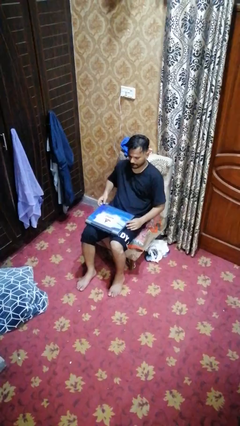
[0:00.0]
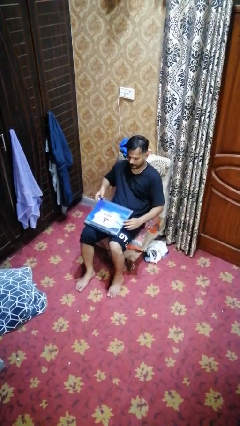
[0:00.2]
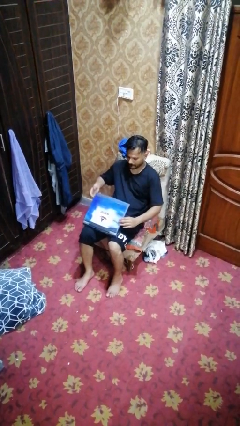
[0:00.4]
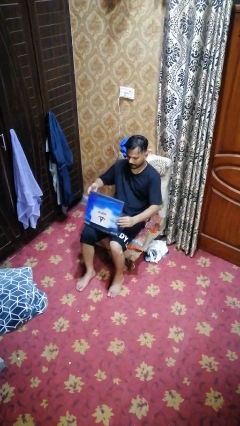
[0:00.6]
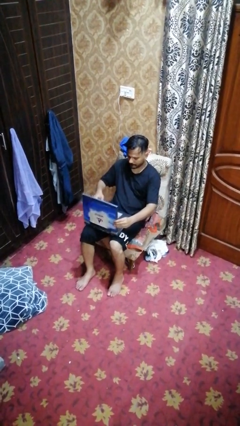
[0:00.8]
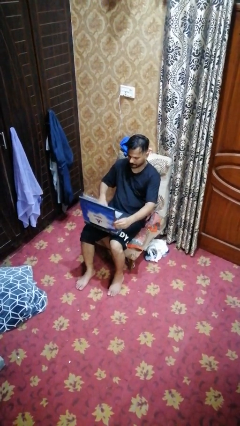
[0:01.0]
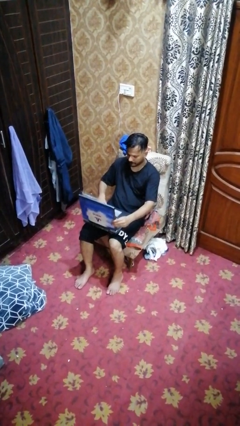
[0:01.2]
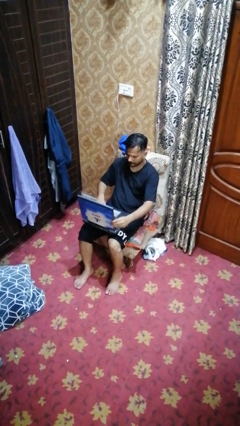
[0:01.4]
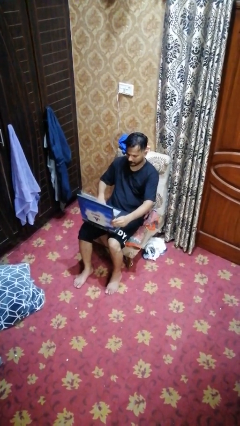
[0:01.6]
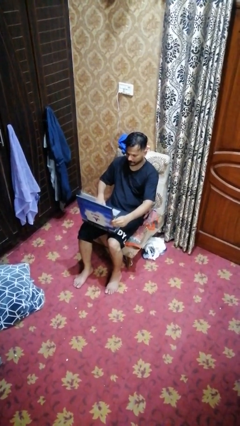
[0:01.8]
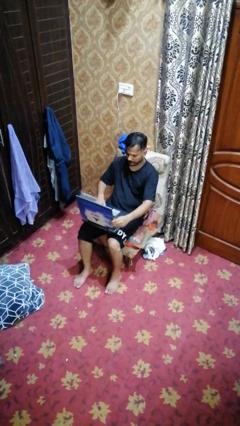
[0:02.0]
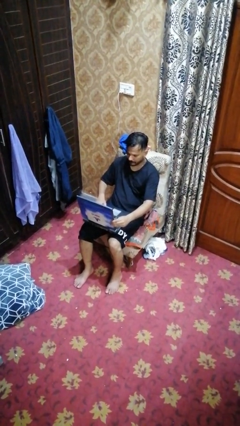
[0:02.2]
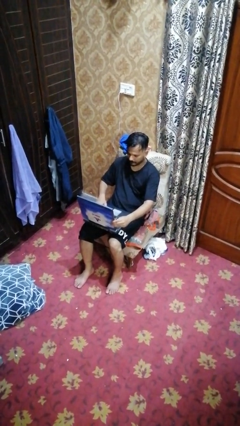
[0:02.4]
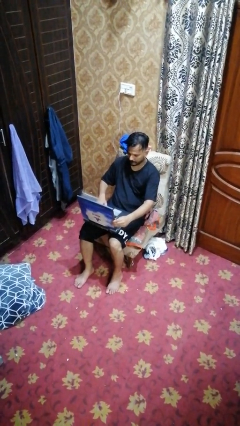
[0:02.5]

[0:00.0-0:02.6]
person opens laptop

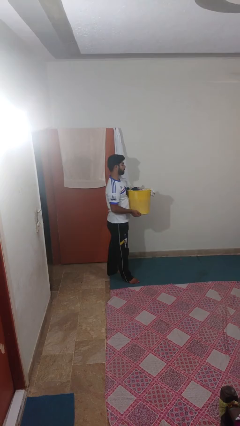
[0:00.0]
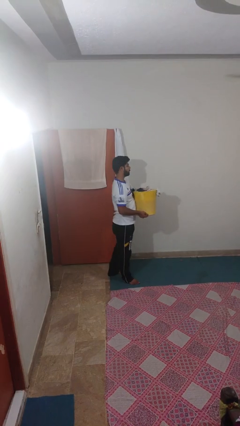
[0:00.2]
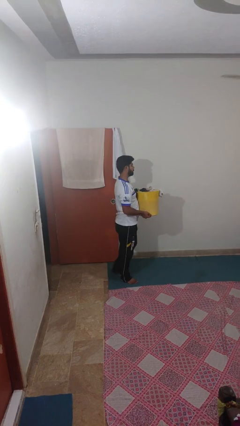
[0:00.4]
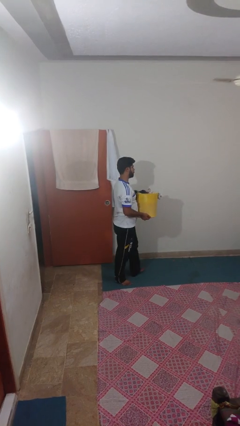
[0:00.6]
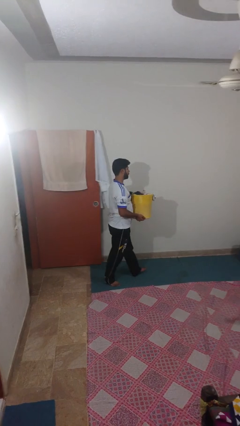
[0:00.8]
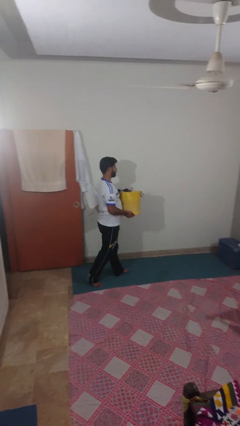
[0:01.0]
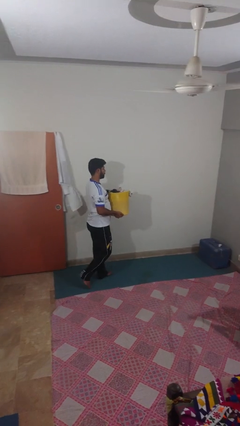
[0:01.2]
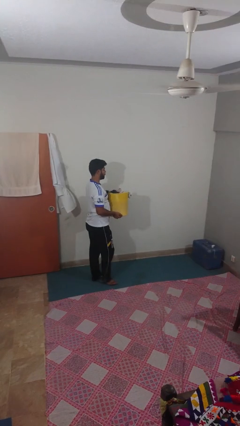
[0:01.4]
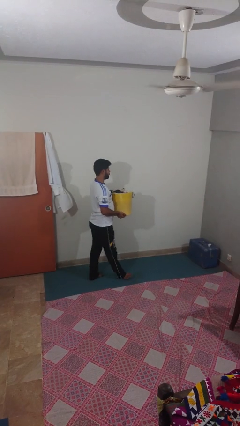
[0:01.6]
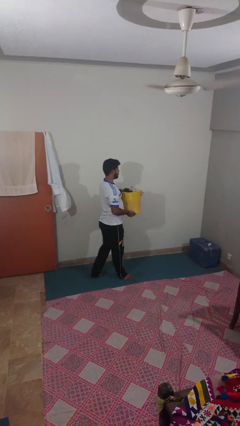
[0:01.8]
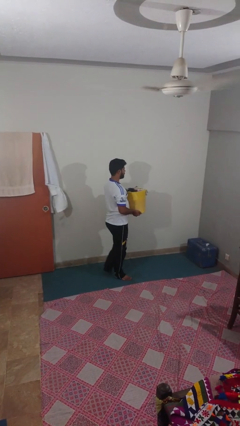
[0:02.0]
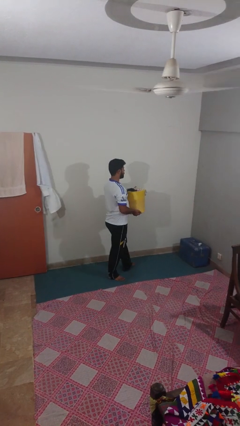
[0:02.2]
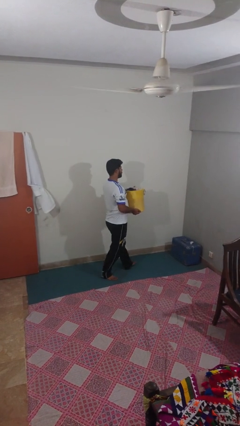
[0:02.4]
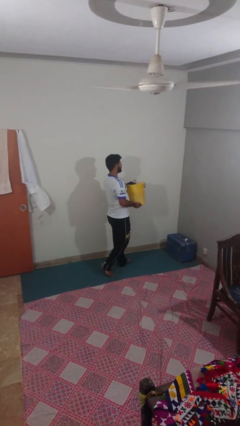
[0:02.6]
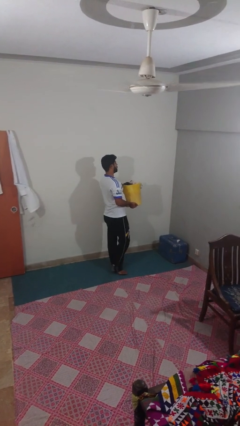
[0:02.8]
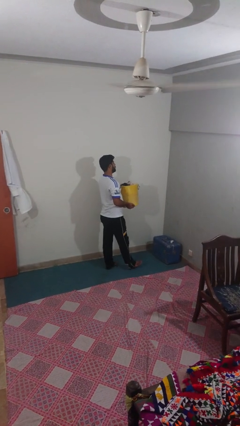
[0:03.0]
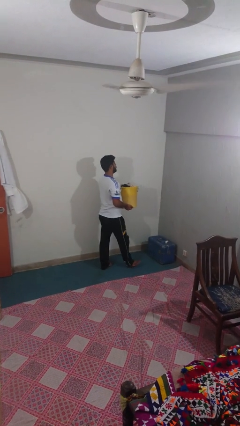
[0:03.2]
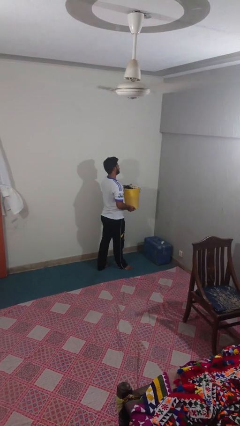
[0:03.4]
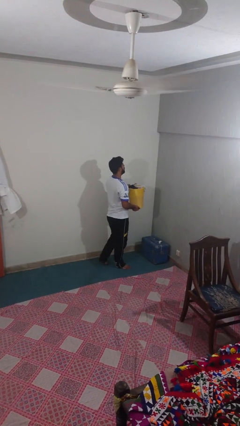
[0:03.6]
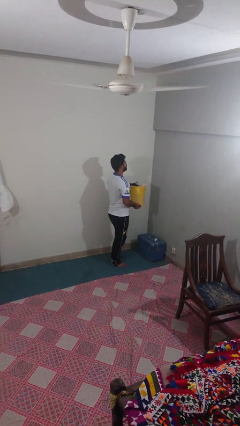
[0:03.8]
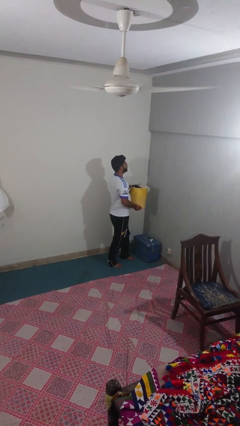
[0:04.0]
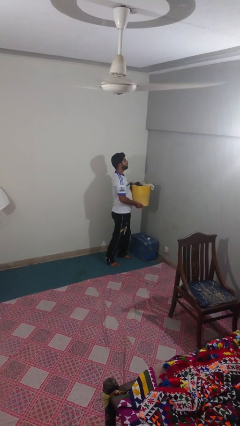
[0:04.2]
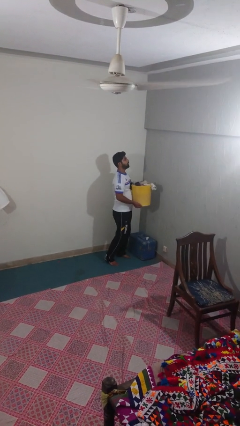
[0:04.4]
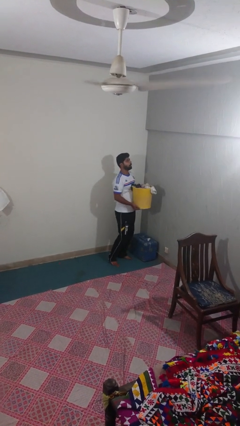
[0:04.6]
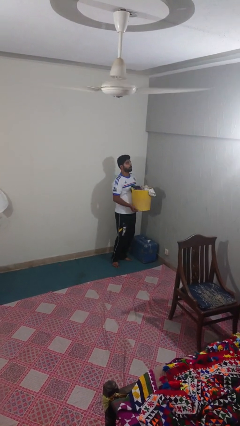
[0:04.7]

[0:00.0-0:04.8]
person carries laundry basket

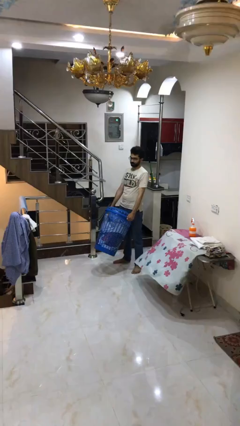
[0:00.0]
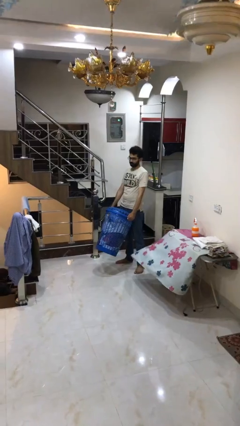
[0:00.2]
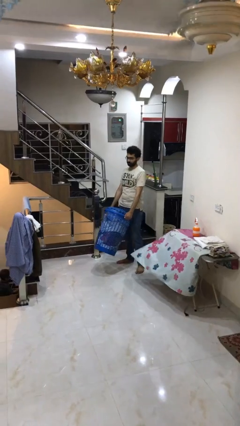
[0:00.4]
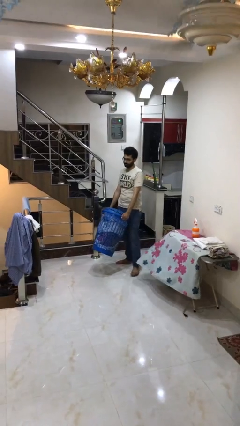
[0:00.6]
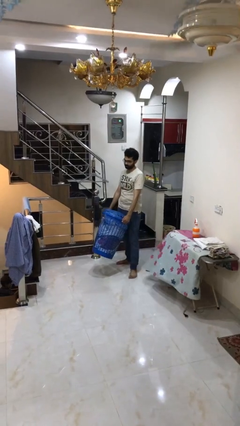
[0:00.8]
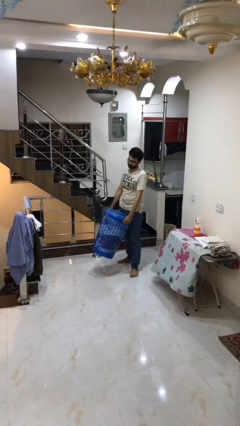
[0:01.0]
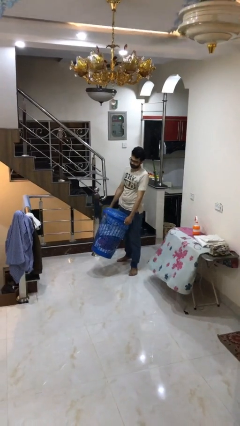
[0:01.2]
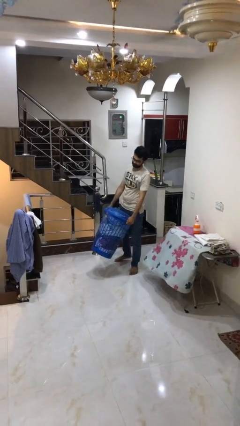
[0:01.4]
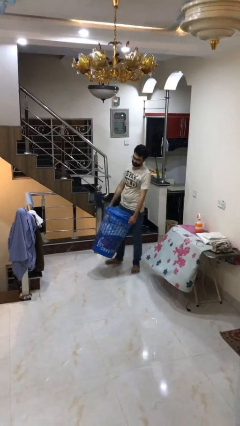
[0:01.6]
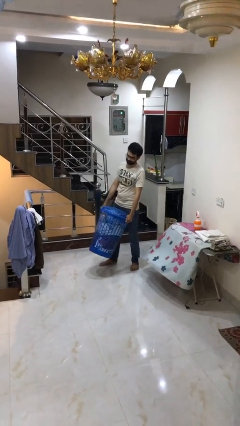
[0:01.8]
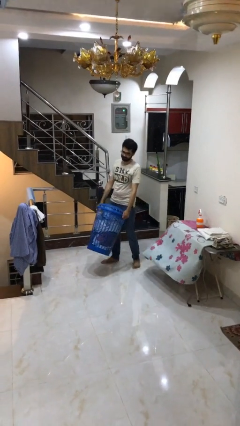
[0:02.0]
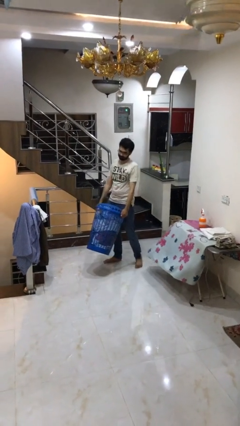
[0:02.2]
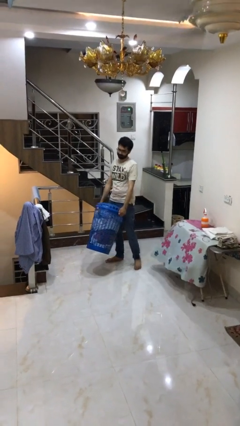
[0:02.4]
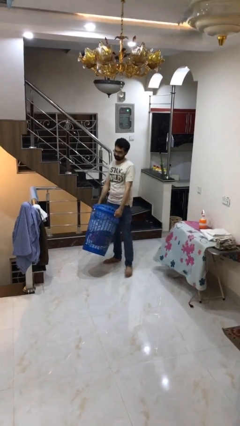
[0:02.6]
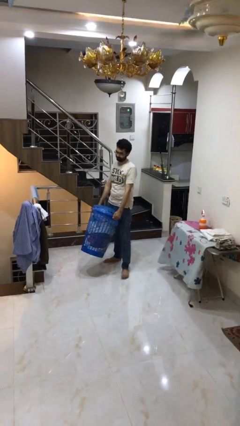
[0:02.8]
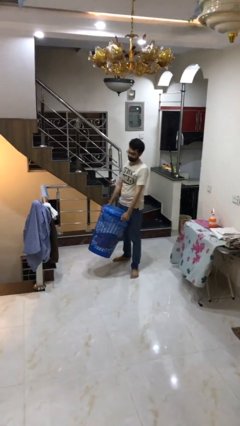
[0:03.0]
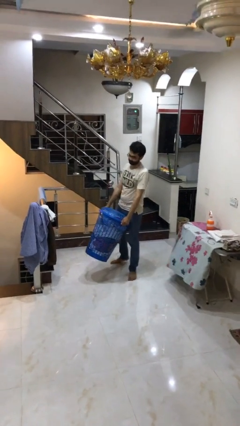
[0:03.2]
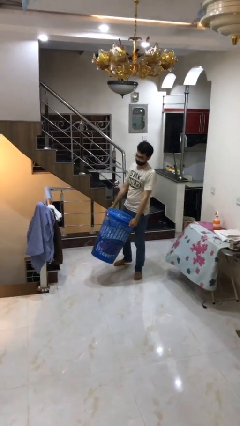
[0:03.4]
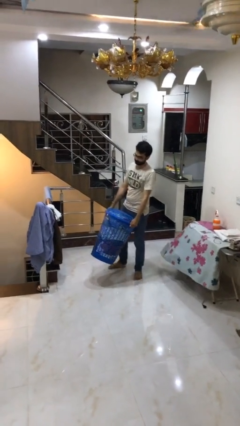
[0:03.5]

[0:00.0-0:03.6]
person carries heavy object

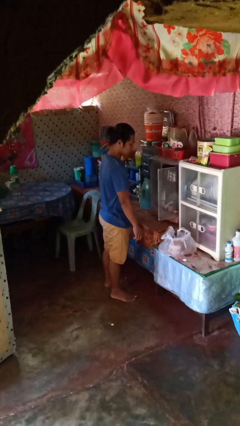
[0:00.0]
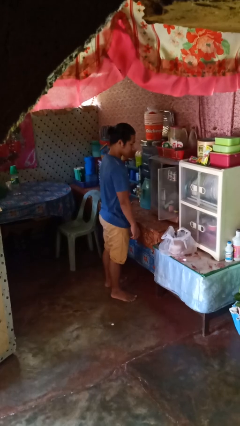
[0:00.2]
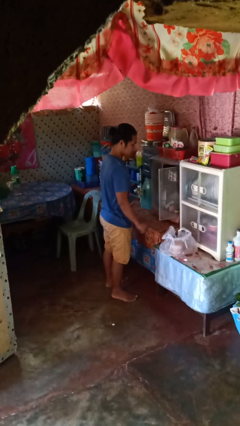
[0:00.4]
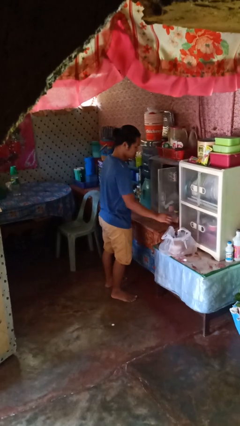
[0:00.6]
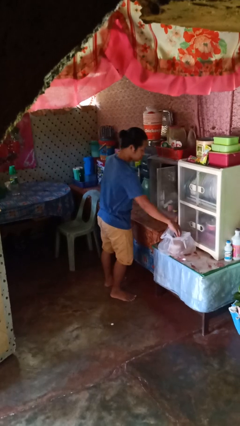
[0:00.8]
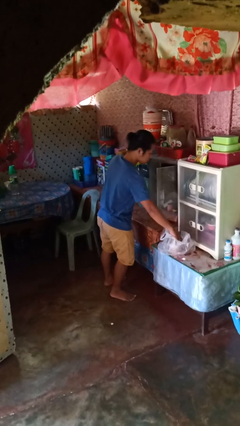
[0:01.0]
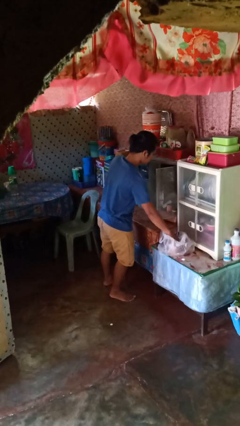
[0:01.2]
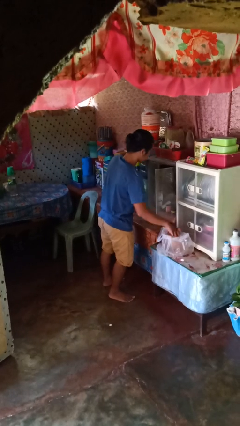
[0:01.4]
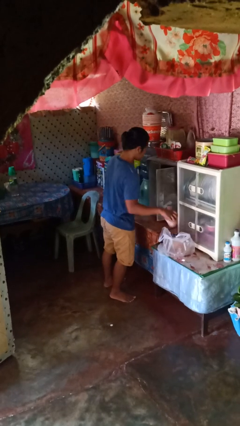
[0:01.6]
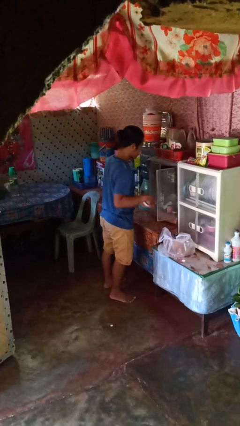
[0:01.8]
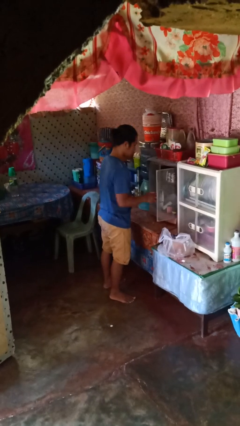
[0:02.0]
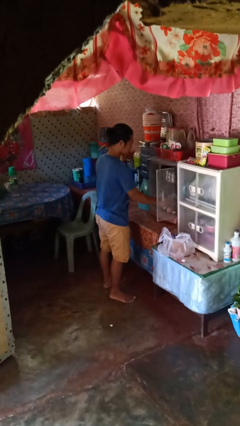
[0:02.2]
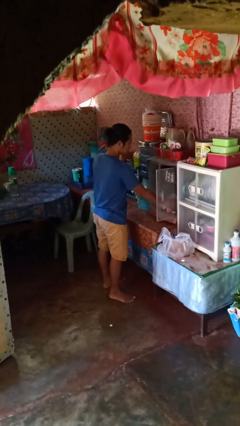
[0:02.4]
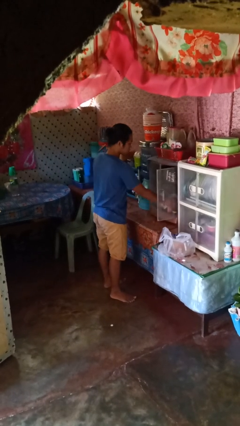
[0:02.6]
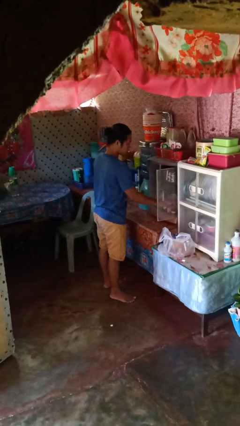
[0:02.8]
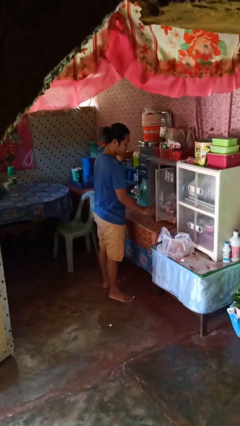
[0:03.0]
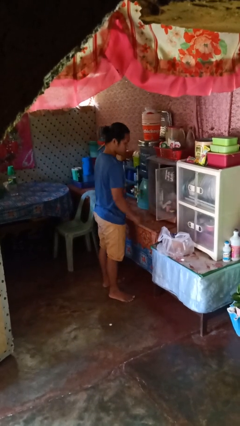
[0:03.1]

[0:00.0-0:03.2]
person loads groceries into cabinet

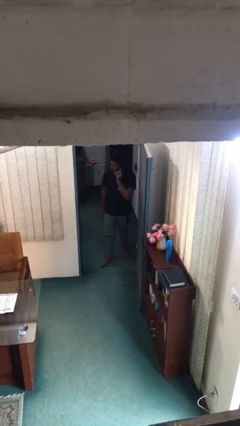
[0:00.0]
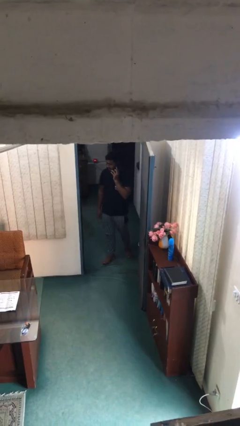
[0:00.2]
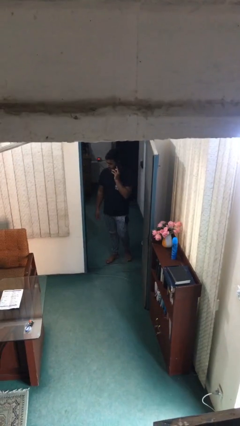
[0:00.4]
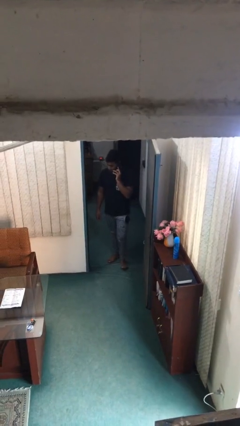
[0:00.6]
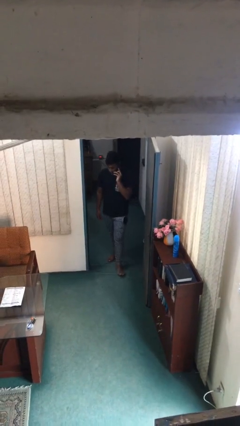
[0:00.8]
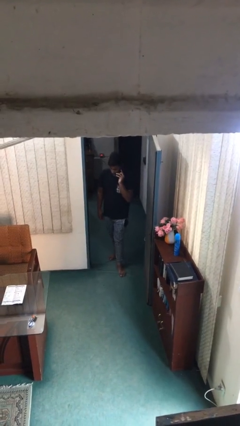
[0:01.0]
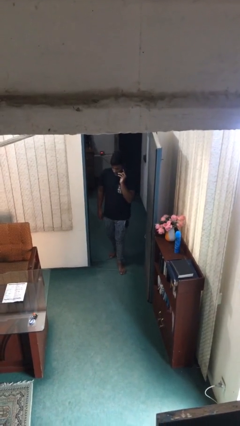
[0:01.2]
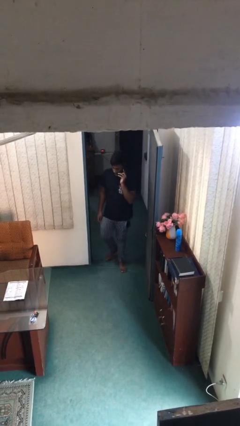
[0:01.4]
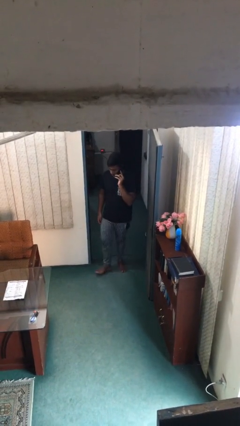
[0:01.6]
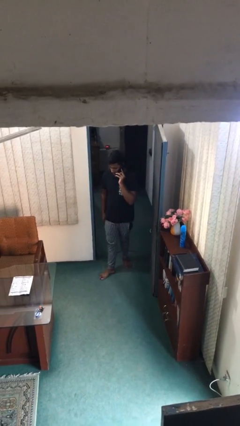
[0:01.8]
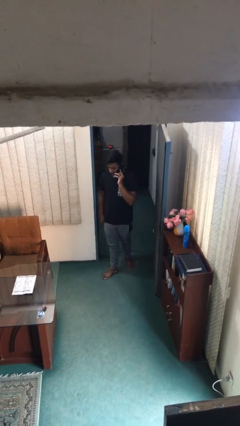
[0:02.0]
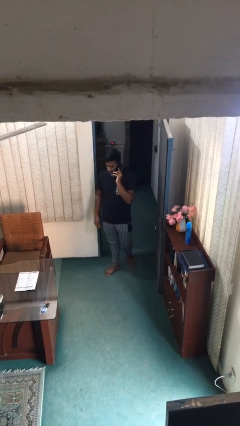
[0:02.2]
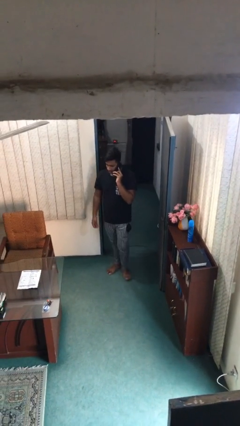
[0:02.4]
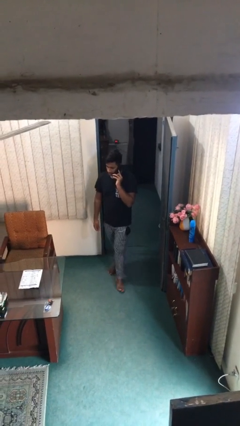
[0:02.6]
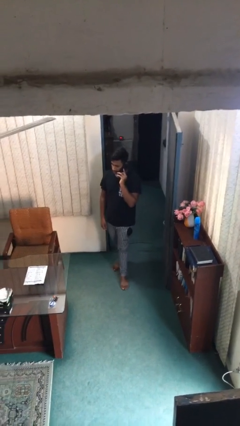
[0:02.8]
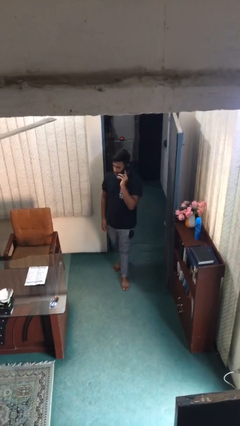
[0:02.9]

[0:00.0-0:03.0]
person enters scene through structure

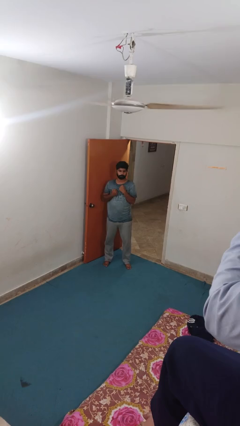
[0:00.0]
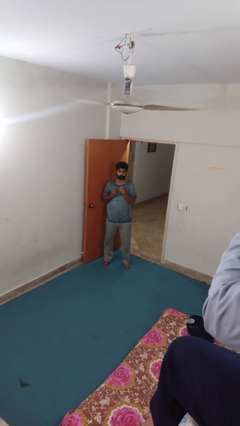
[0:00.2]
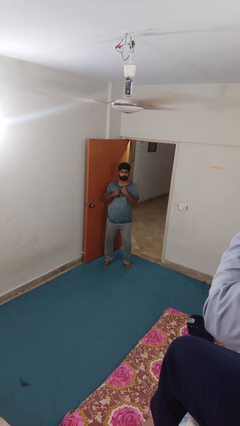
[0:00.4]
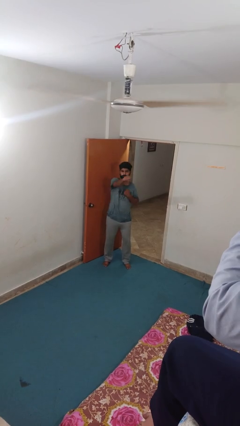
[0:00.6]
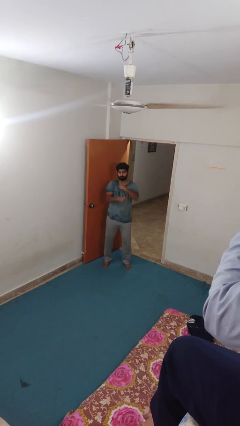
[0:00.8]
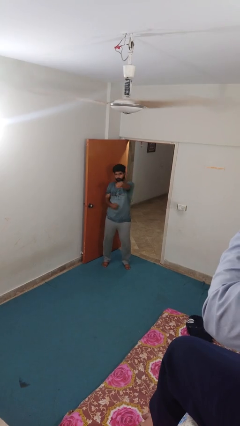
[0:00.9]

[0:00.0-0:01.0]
person punches
